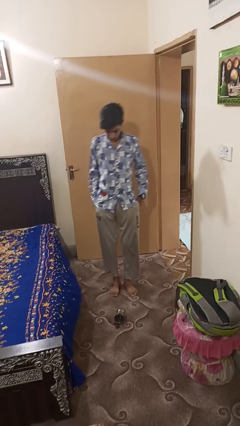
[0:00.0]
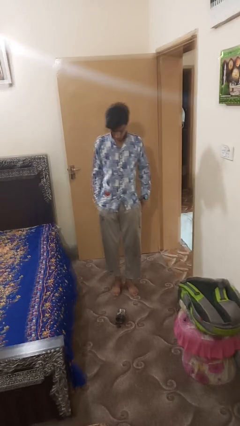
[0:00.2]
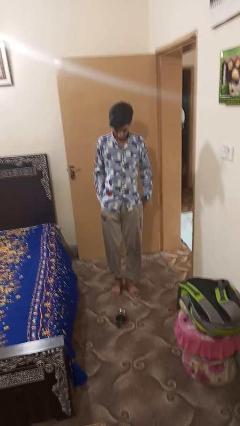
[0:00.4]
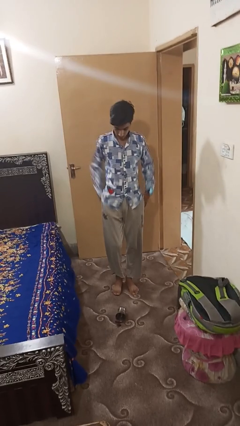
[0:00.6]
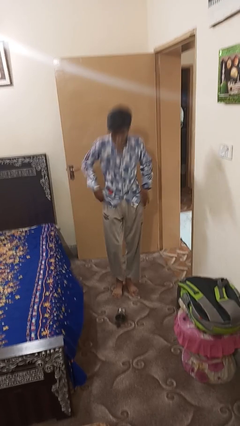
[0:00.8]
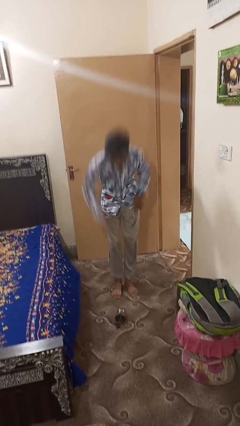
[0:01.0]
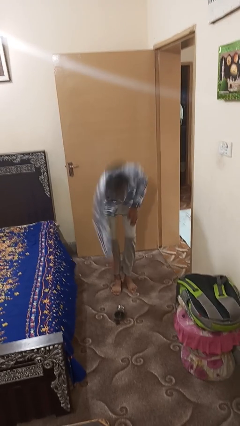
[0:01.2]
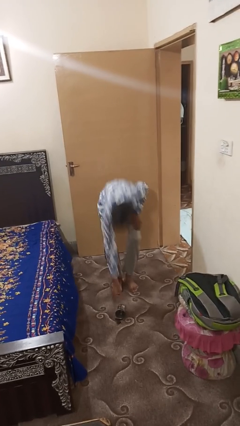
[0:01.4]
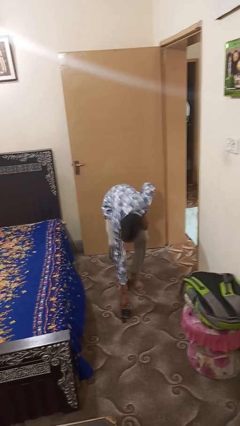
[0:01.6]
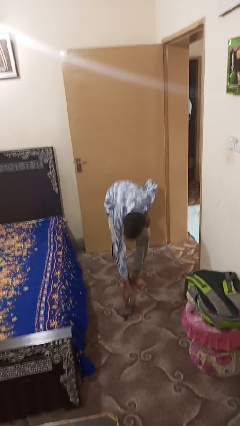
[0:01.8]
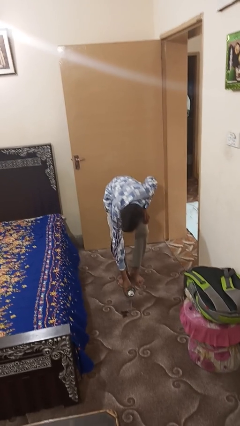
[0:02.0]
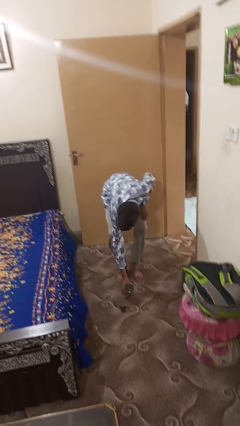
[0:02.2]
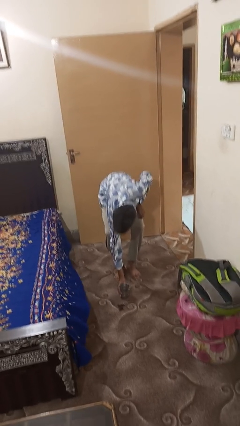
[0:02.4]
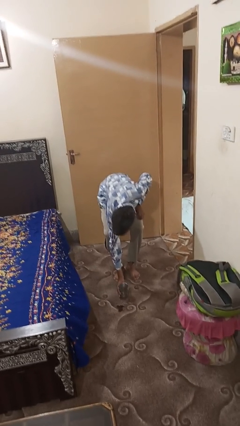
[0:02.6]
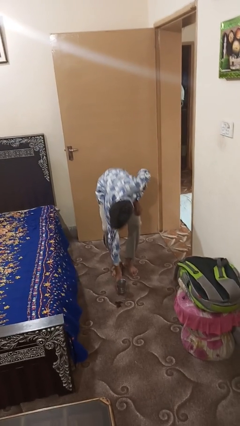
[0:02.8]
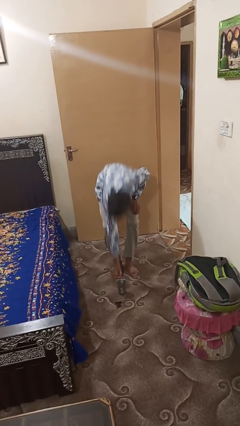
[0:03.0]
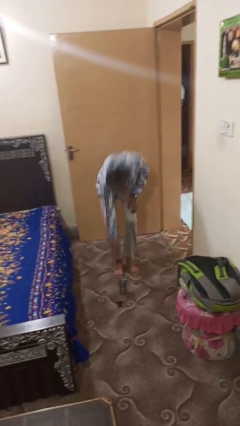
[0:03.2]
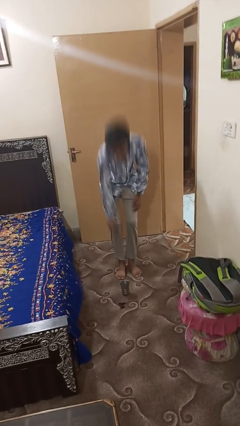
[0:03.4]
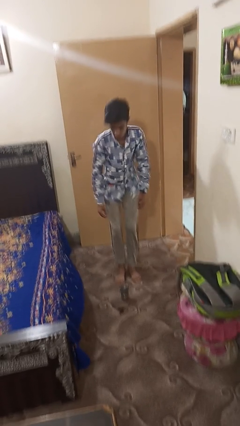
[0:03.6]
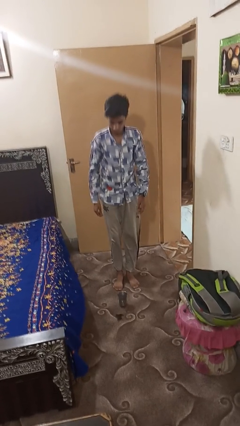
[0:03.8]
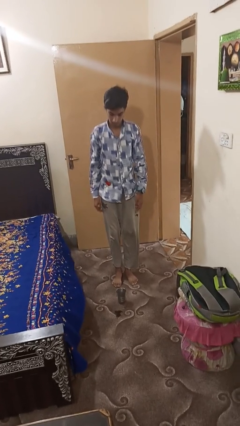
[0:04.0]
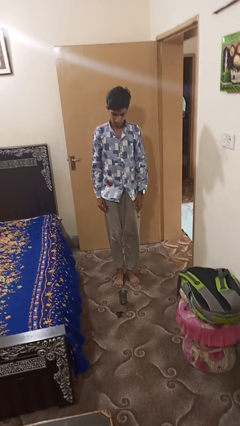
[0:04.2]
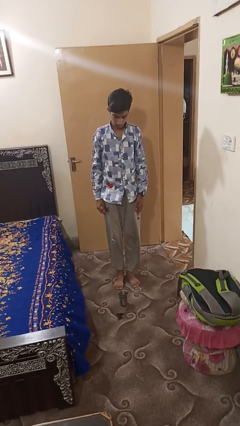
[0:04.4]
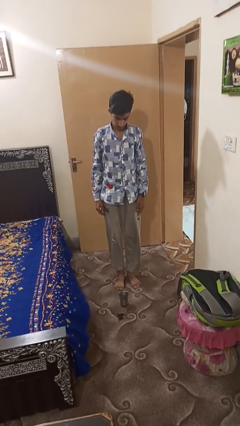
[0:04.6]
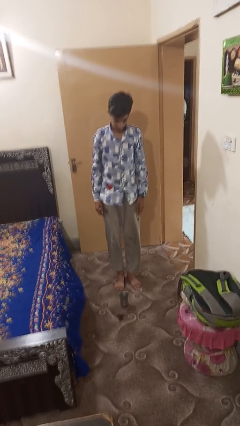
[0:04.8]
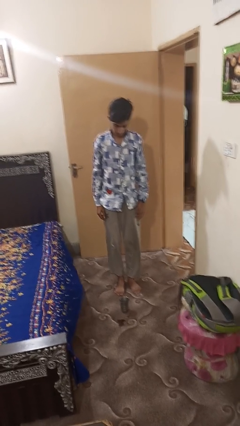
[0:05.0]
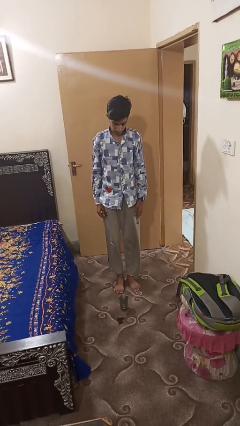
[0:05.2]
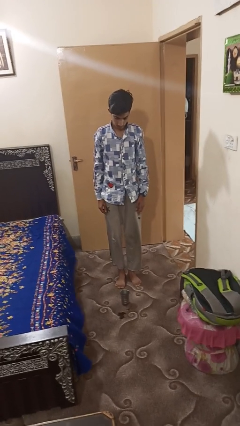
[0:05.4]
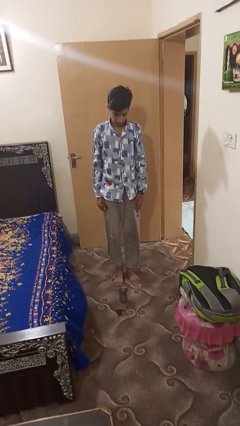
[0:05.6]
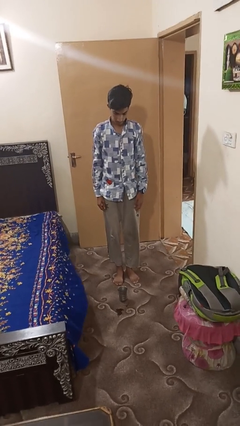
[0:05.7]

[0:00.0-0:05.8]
person sets upright glass

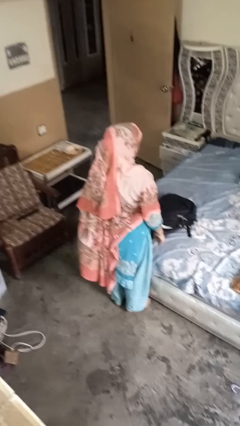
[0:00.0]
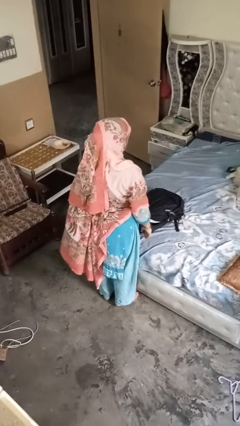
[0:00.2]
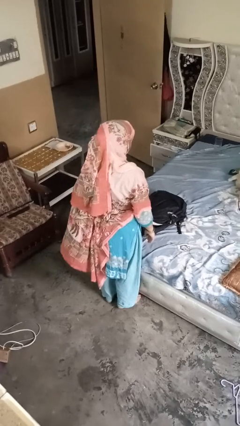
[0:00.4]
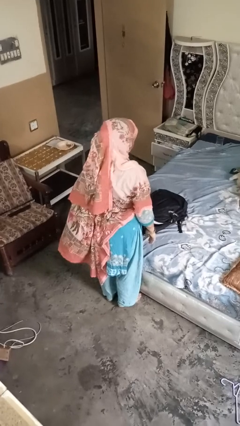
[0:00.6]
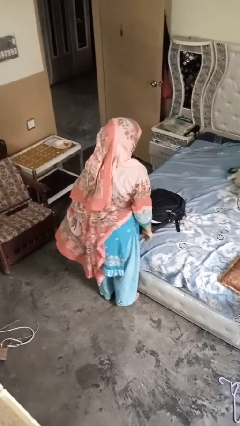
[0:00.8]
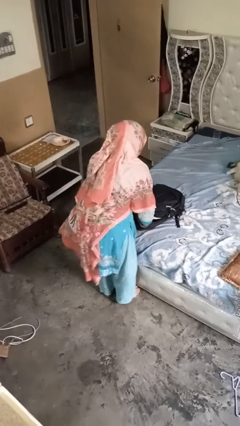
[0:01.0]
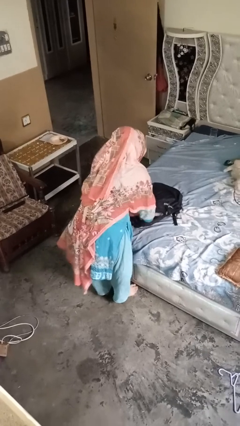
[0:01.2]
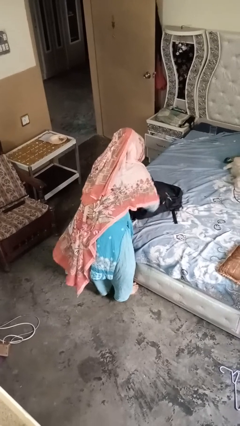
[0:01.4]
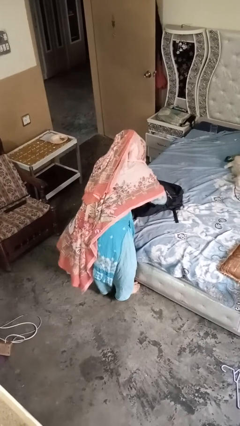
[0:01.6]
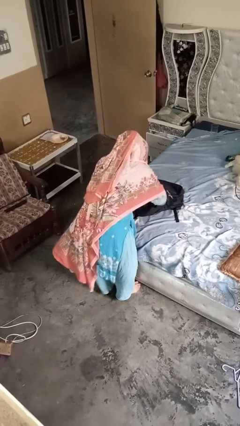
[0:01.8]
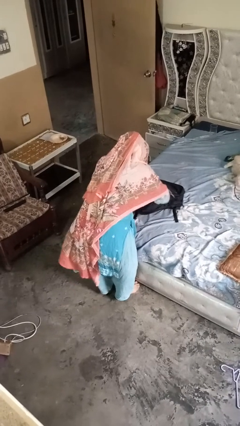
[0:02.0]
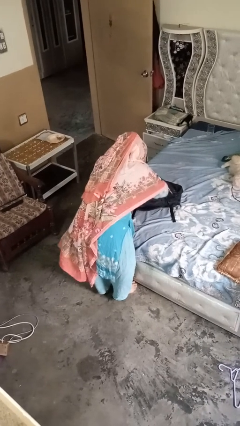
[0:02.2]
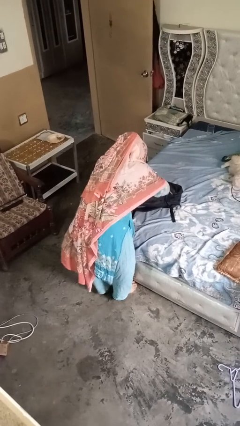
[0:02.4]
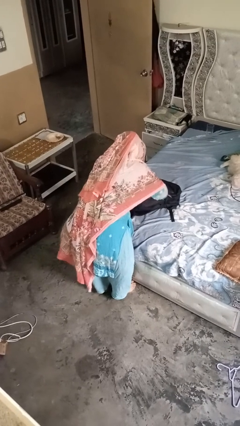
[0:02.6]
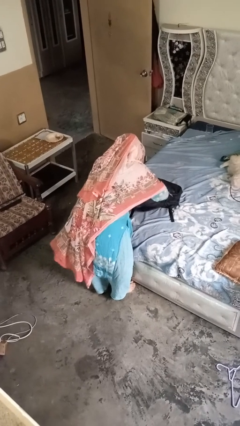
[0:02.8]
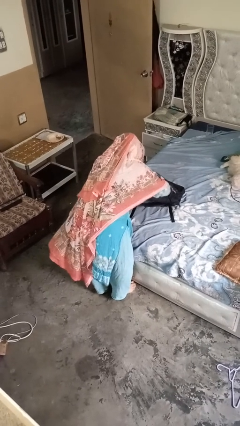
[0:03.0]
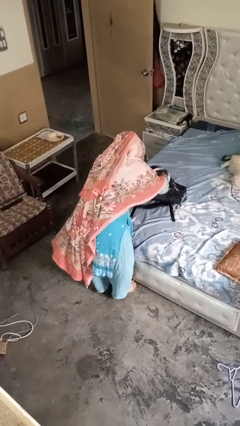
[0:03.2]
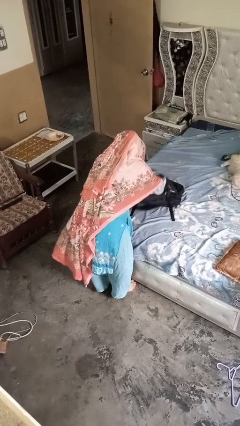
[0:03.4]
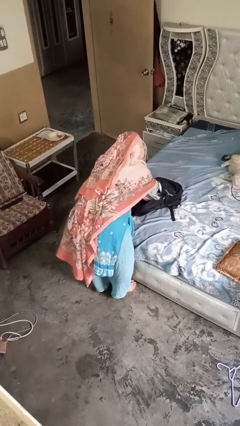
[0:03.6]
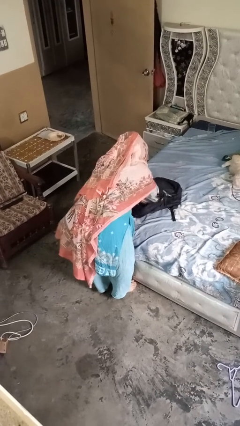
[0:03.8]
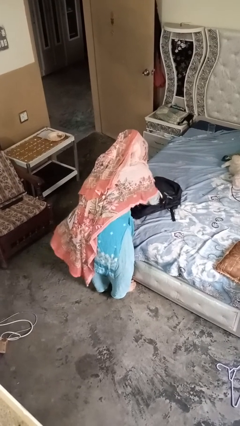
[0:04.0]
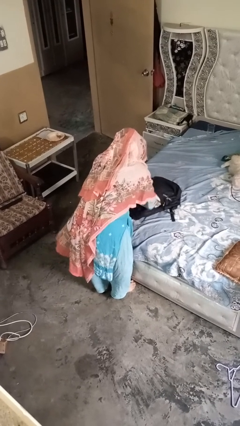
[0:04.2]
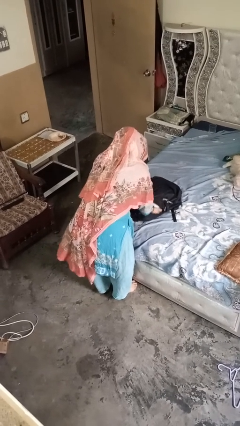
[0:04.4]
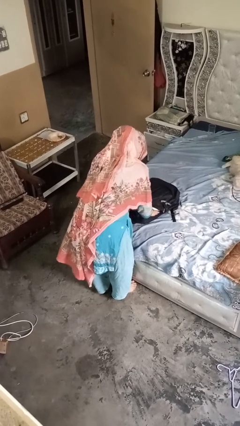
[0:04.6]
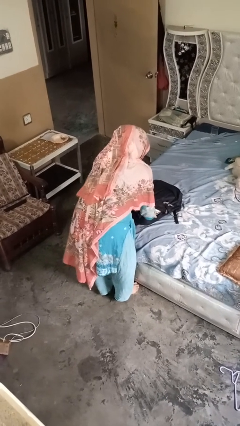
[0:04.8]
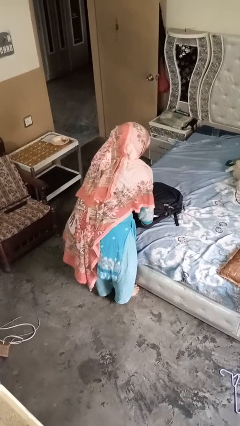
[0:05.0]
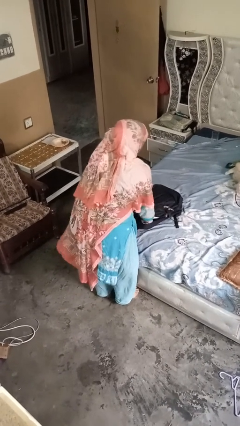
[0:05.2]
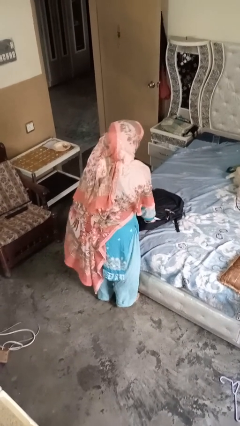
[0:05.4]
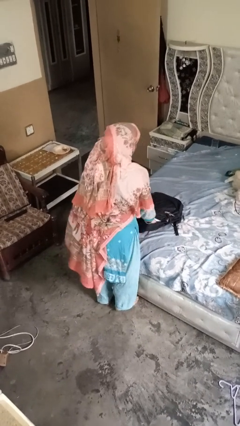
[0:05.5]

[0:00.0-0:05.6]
person searches in bag

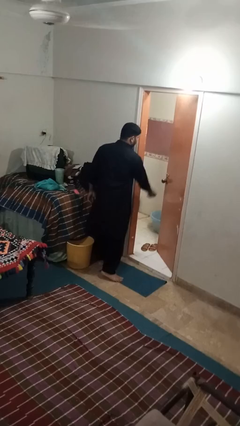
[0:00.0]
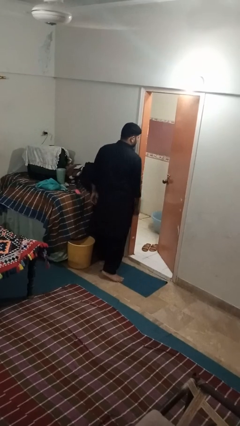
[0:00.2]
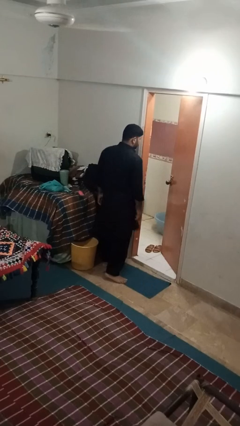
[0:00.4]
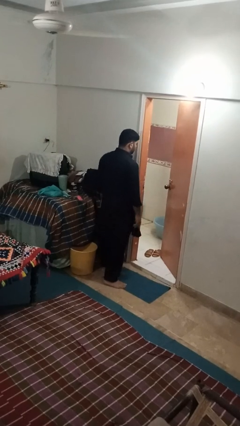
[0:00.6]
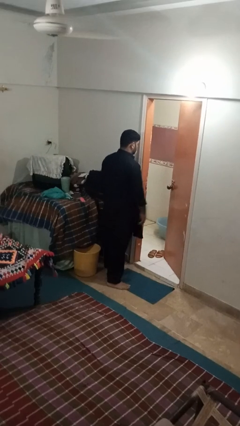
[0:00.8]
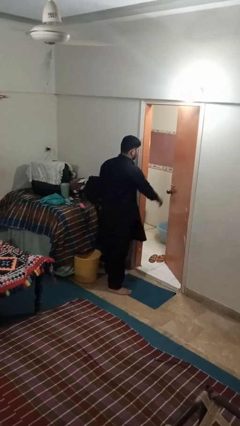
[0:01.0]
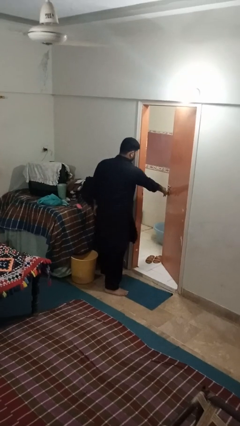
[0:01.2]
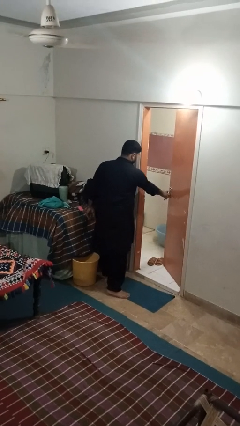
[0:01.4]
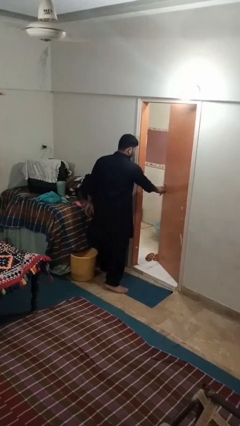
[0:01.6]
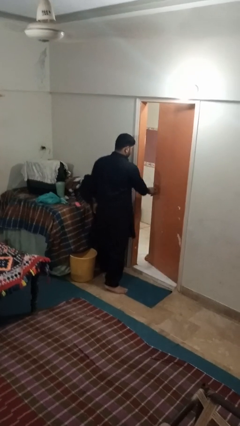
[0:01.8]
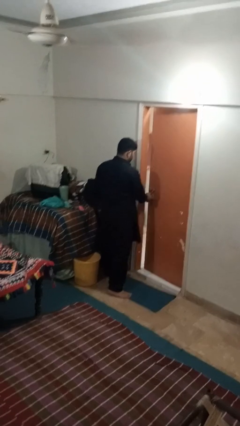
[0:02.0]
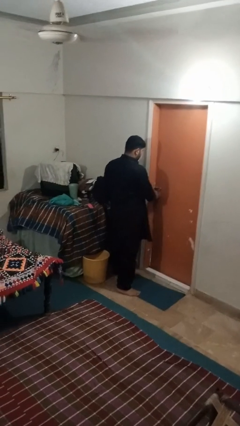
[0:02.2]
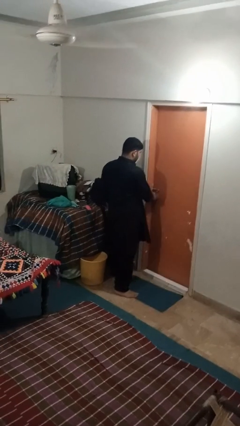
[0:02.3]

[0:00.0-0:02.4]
person closes facility door

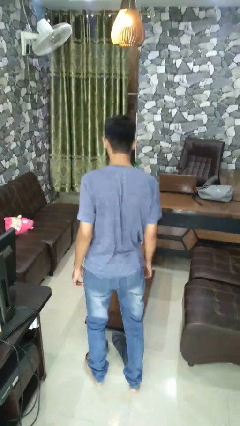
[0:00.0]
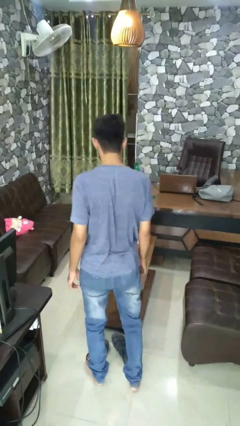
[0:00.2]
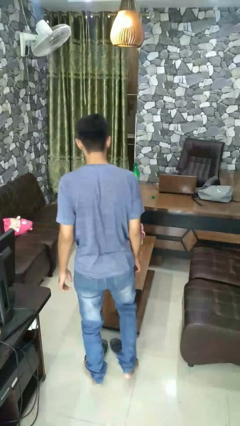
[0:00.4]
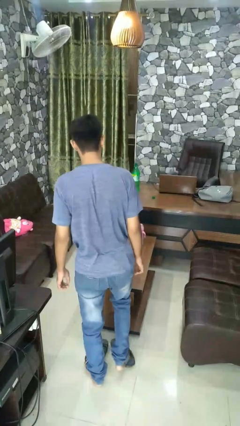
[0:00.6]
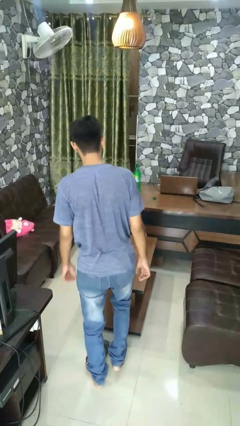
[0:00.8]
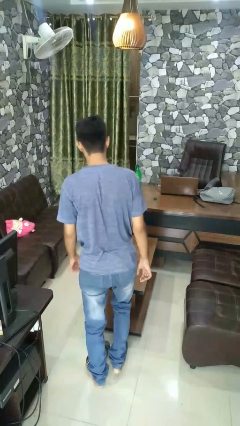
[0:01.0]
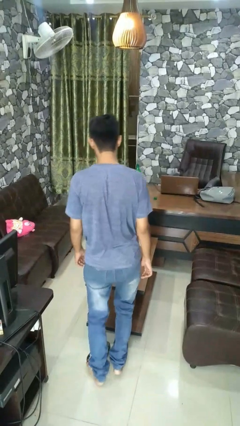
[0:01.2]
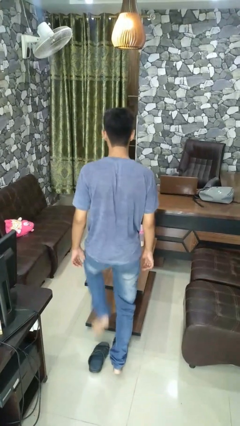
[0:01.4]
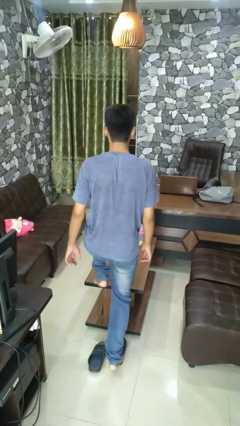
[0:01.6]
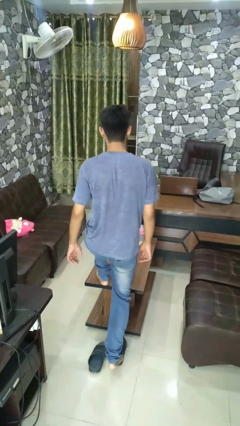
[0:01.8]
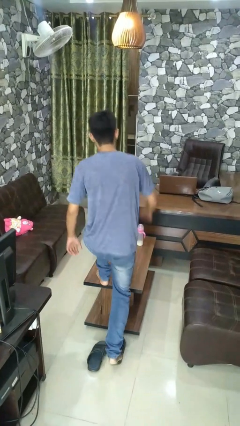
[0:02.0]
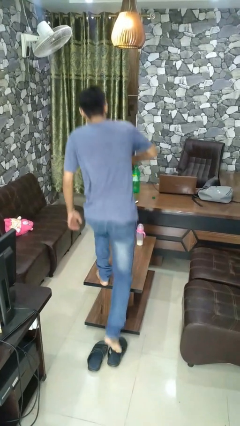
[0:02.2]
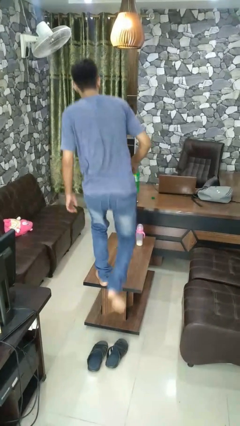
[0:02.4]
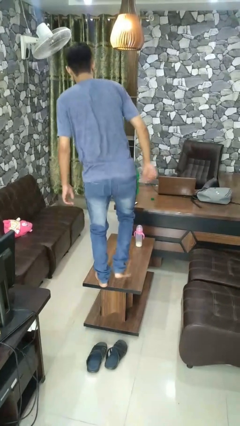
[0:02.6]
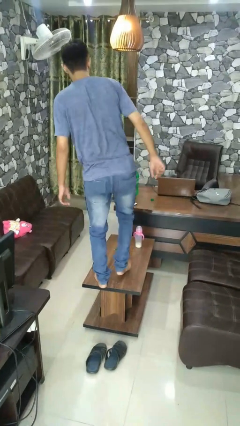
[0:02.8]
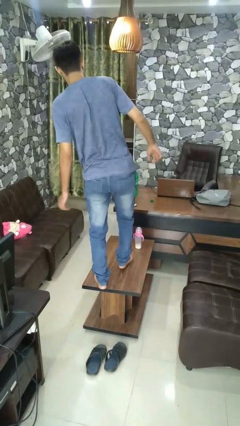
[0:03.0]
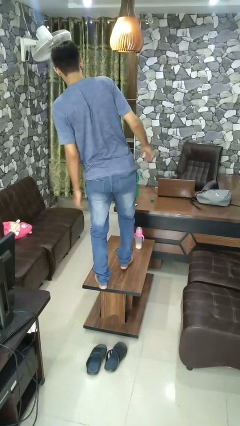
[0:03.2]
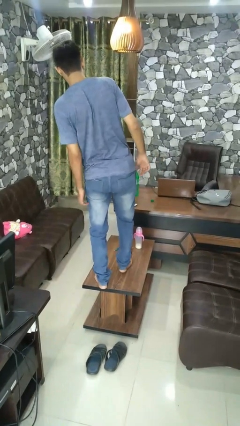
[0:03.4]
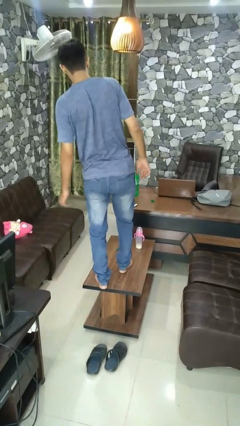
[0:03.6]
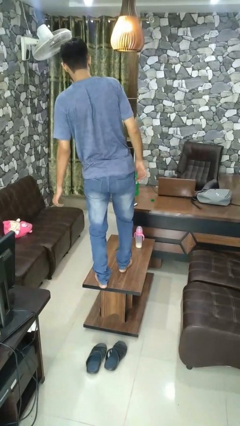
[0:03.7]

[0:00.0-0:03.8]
person climbs on table

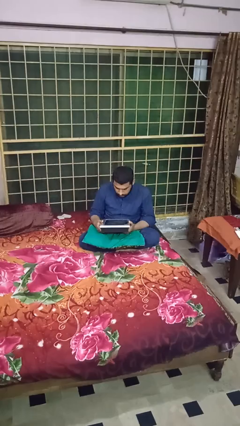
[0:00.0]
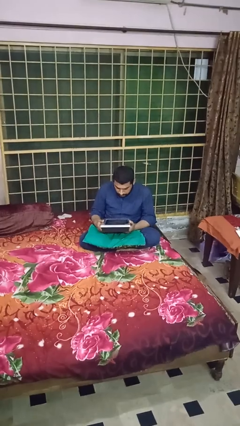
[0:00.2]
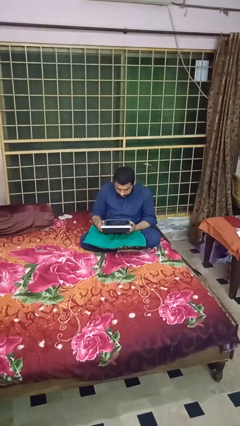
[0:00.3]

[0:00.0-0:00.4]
person interacts with tablet
